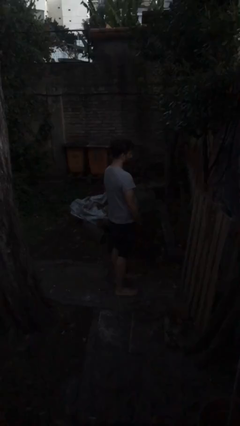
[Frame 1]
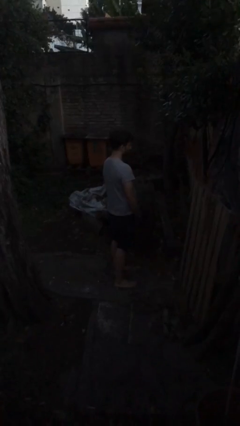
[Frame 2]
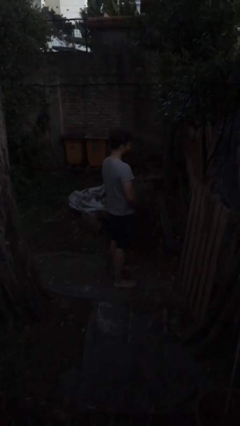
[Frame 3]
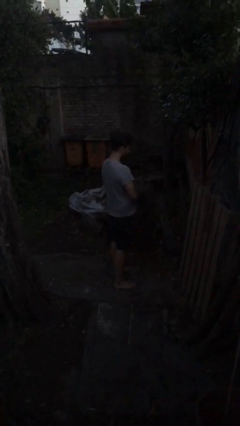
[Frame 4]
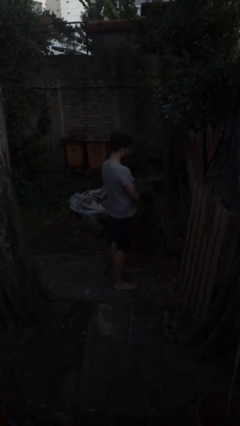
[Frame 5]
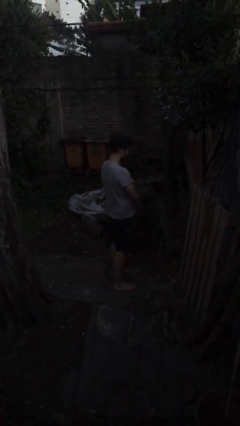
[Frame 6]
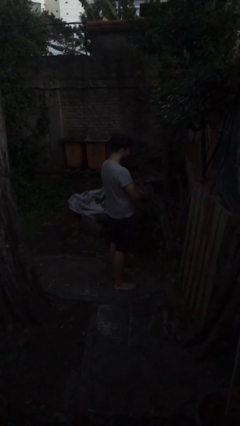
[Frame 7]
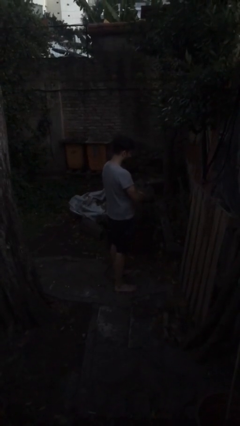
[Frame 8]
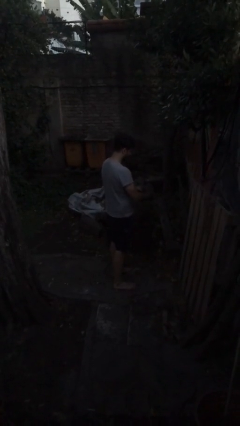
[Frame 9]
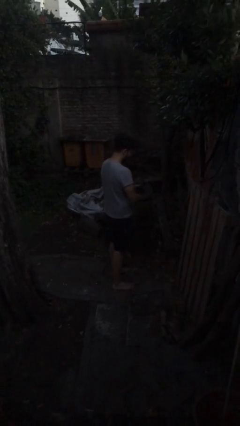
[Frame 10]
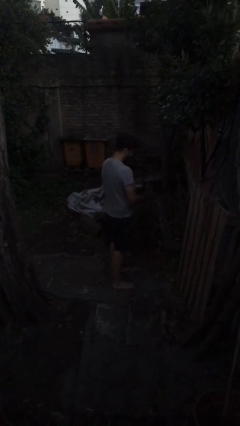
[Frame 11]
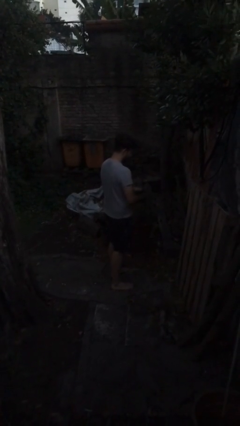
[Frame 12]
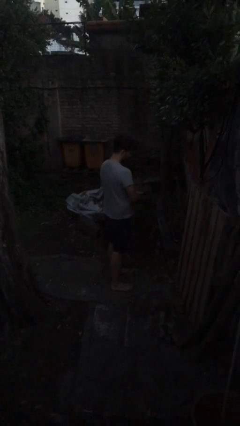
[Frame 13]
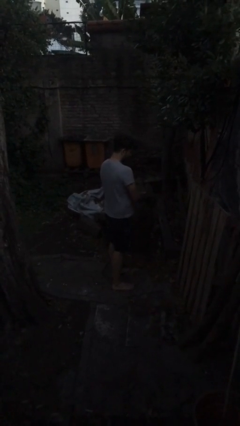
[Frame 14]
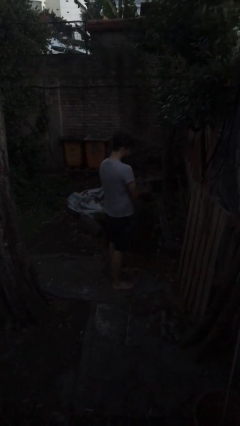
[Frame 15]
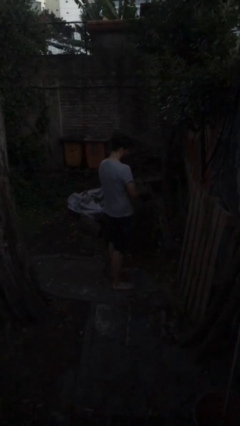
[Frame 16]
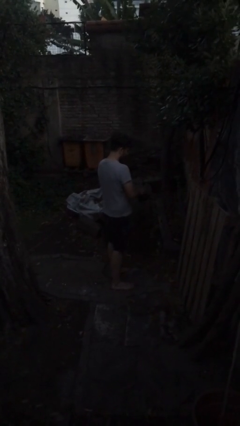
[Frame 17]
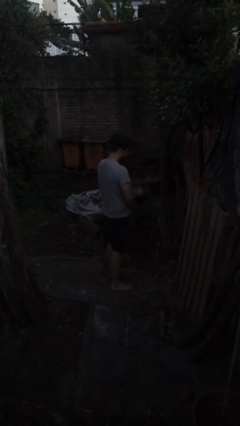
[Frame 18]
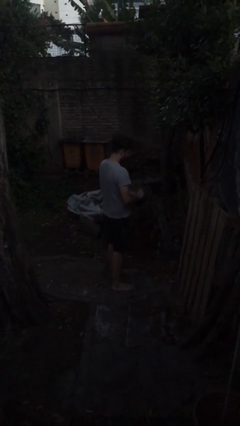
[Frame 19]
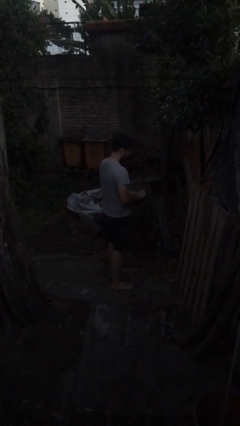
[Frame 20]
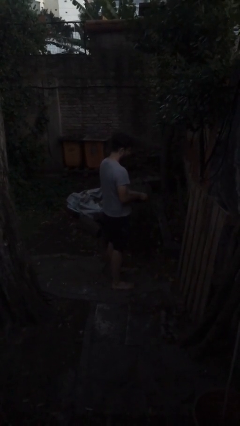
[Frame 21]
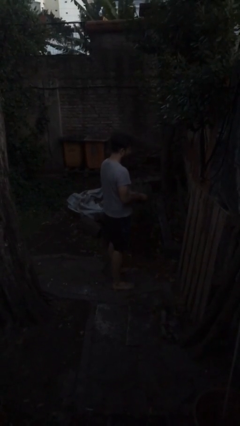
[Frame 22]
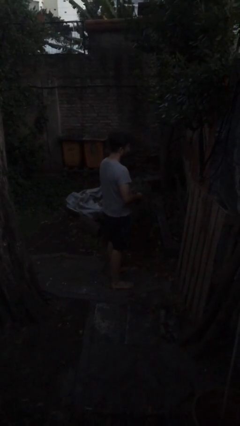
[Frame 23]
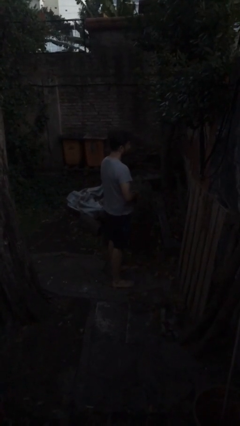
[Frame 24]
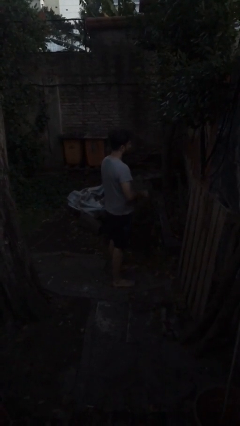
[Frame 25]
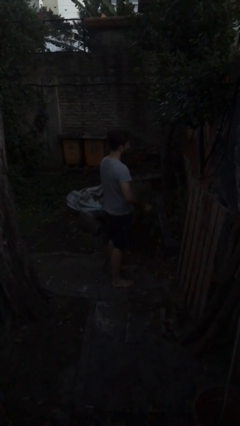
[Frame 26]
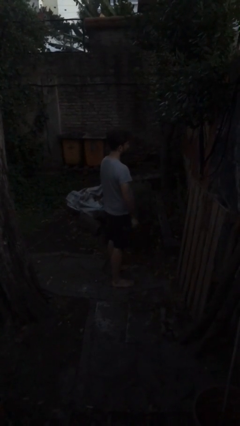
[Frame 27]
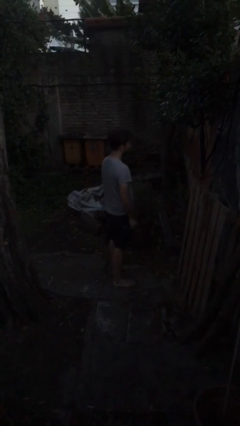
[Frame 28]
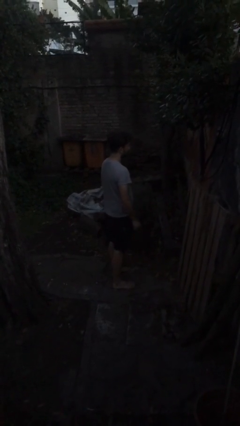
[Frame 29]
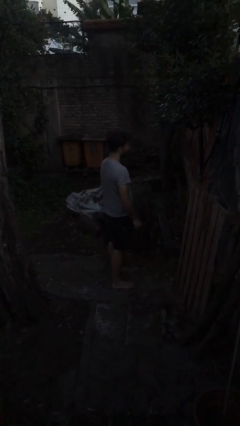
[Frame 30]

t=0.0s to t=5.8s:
person takes off gloves

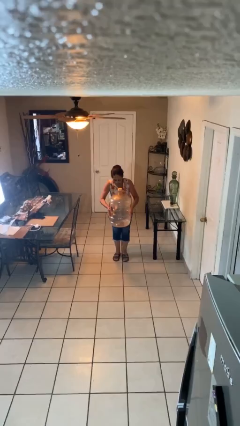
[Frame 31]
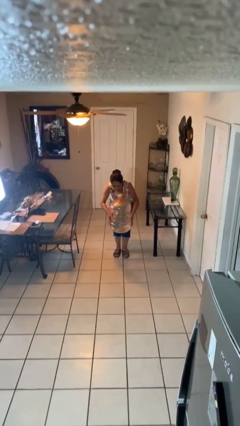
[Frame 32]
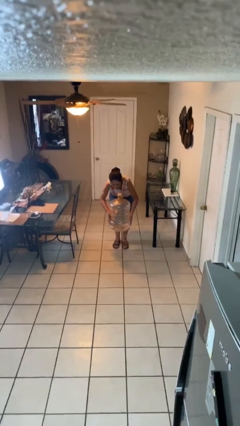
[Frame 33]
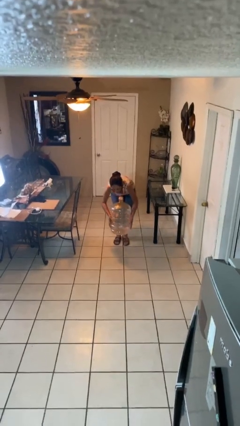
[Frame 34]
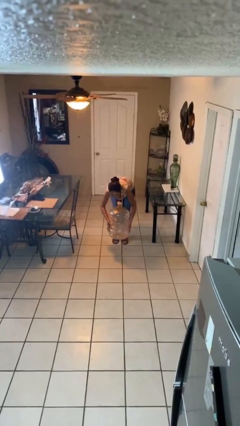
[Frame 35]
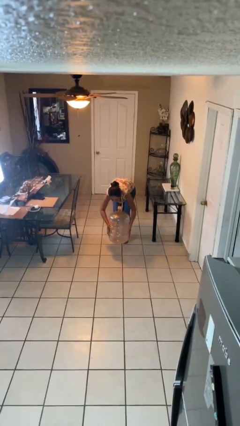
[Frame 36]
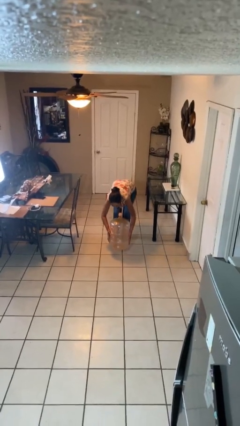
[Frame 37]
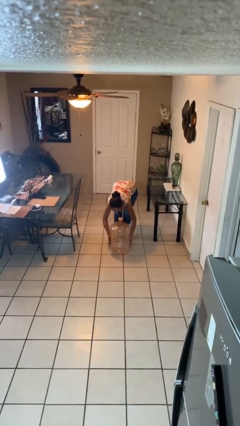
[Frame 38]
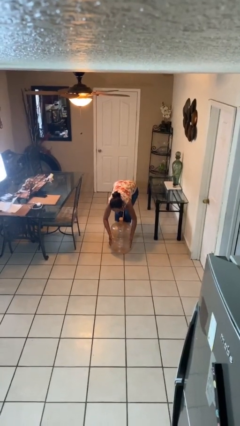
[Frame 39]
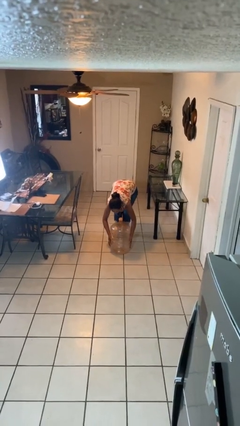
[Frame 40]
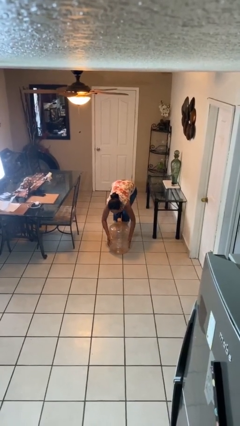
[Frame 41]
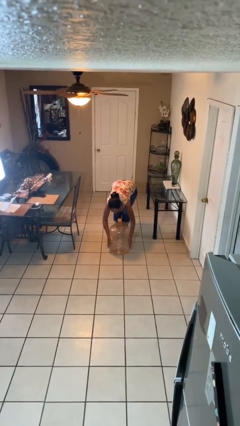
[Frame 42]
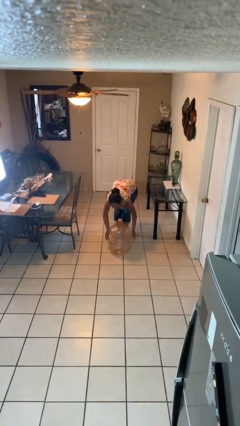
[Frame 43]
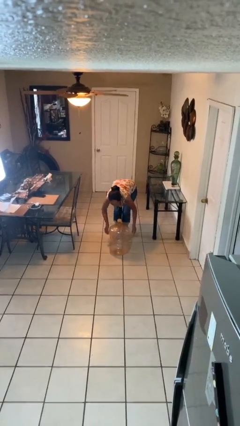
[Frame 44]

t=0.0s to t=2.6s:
person puts down object on floor

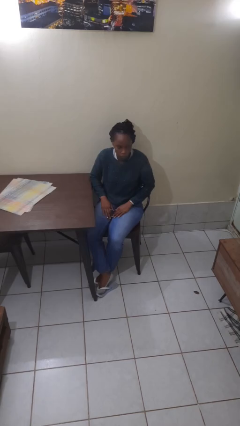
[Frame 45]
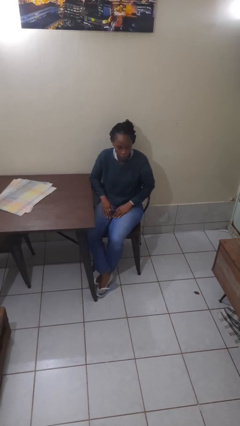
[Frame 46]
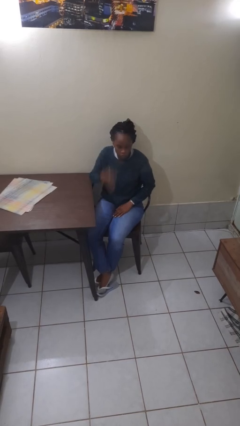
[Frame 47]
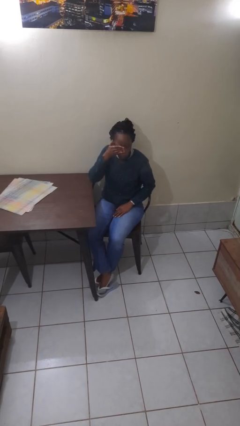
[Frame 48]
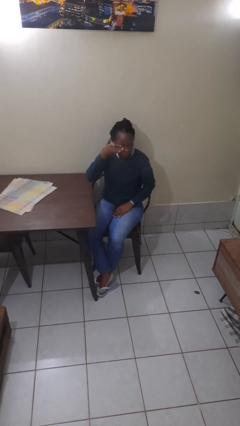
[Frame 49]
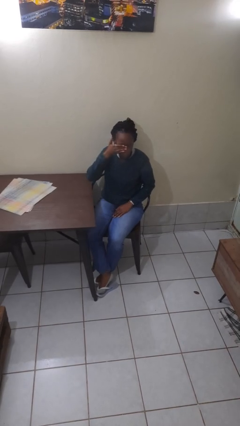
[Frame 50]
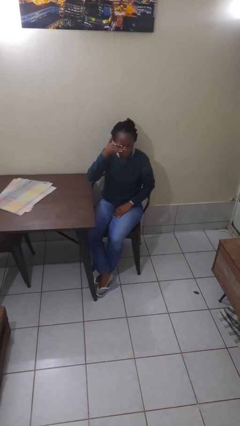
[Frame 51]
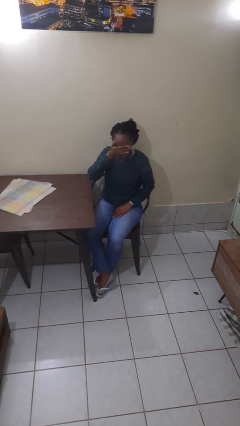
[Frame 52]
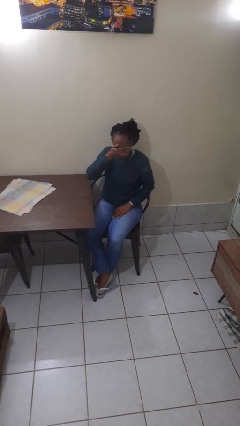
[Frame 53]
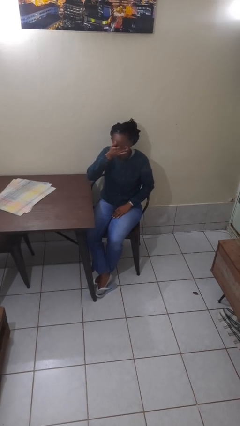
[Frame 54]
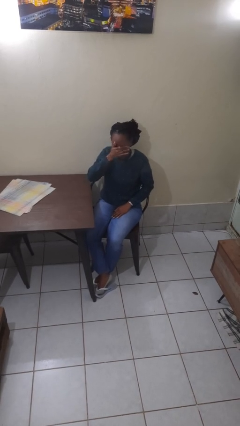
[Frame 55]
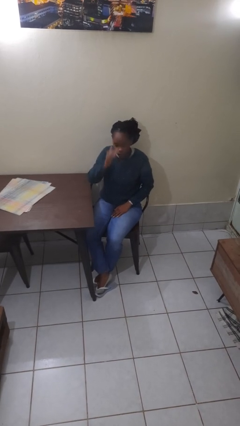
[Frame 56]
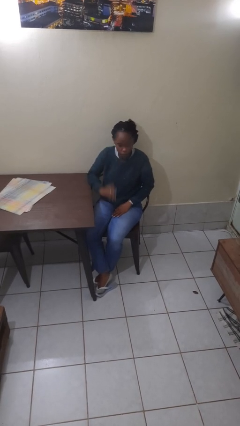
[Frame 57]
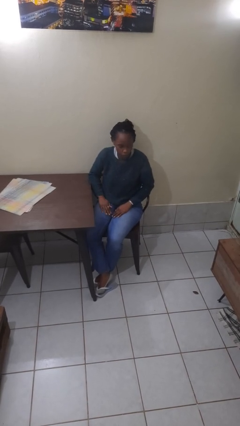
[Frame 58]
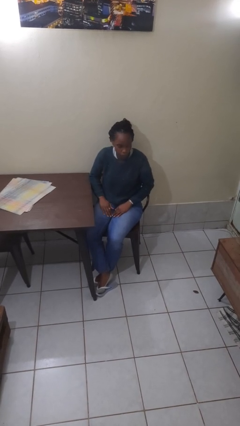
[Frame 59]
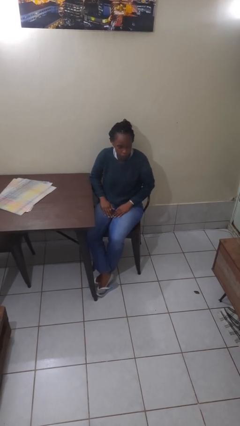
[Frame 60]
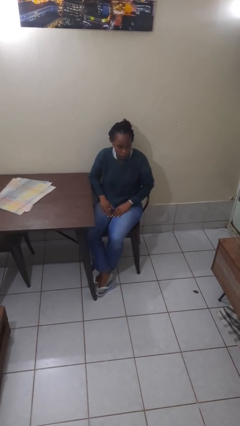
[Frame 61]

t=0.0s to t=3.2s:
person rubs eyes

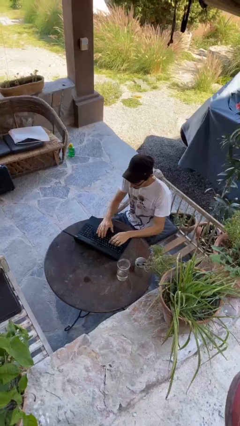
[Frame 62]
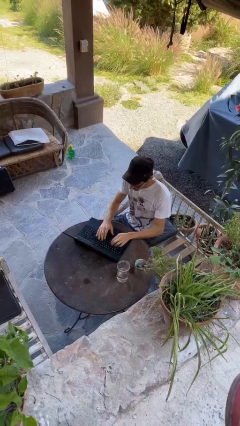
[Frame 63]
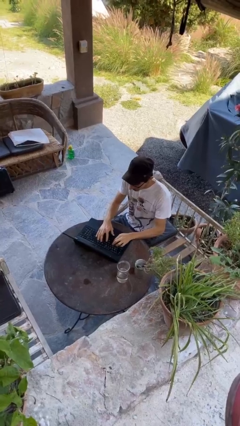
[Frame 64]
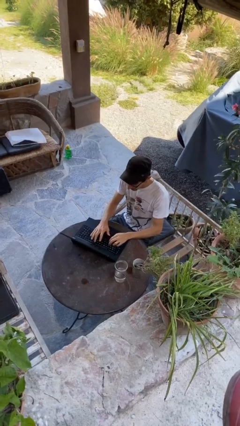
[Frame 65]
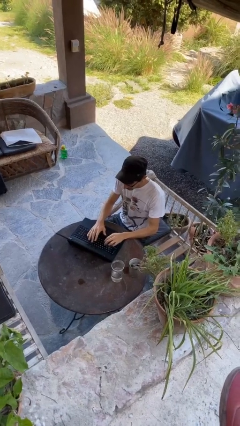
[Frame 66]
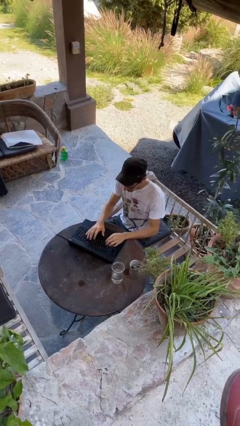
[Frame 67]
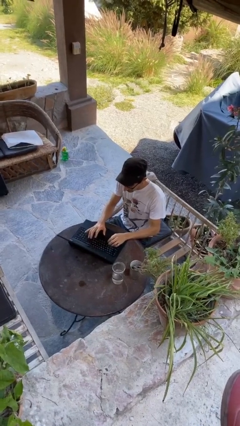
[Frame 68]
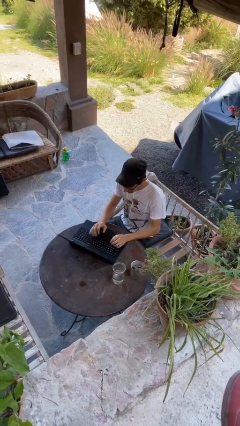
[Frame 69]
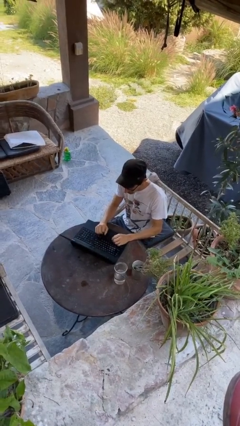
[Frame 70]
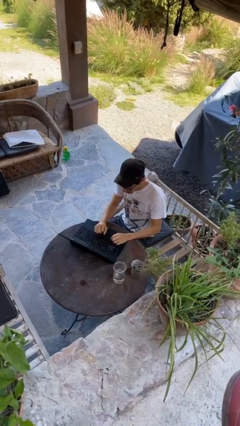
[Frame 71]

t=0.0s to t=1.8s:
person interacts with laptop

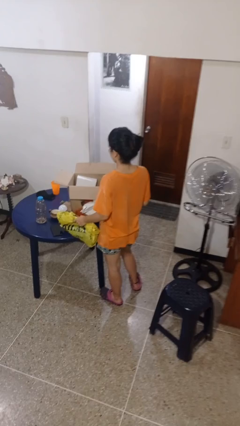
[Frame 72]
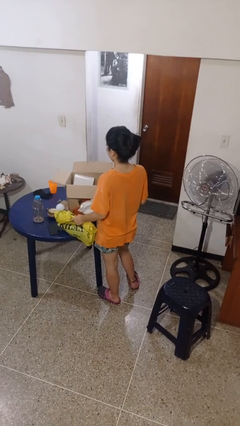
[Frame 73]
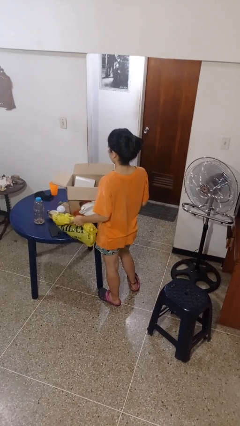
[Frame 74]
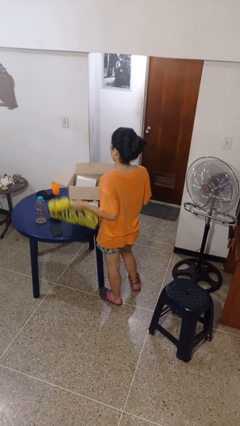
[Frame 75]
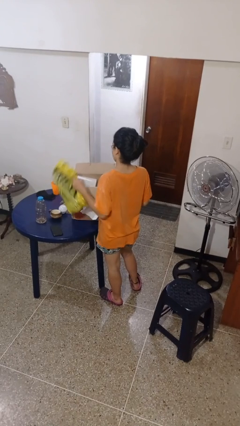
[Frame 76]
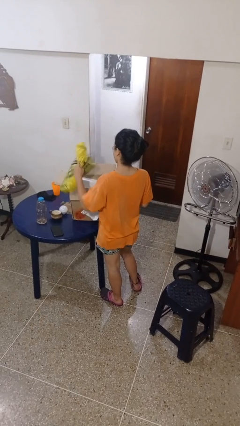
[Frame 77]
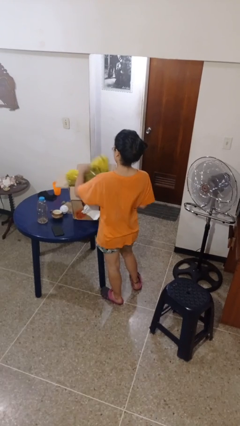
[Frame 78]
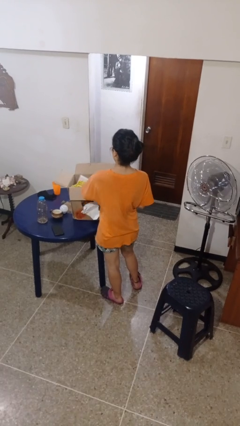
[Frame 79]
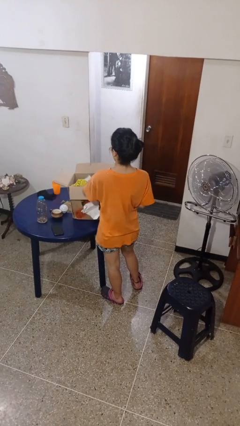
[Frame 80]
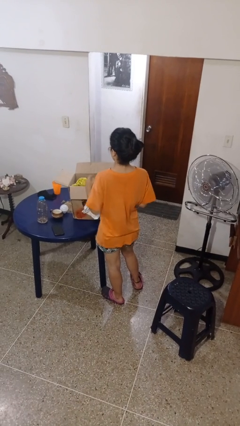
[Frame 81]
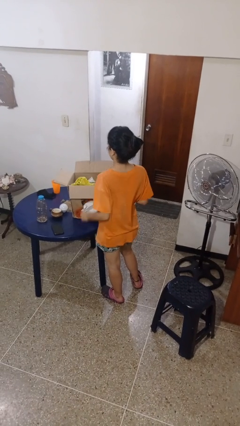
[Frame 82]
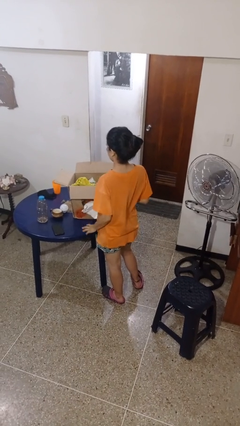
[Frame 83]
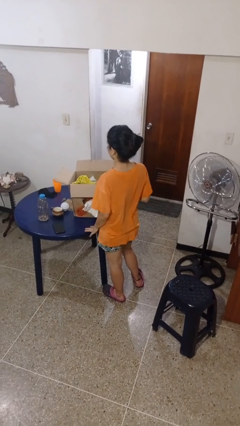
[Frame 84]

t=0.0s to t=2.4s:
person puts object into box

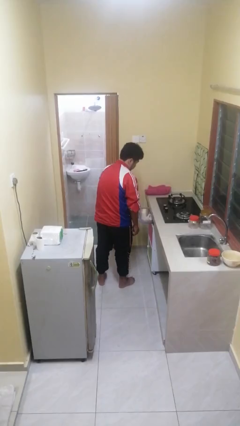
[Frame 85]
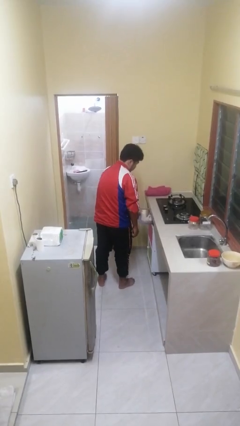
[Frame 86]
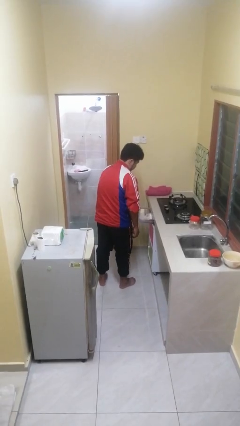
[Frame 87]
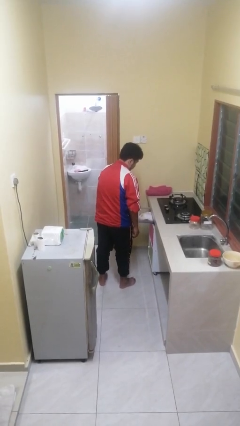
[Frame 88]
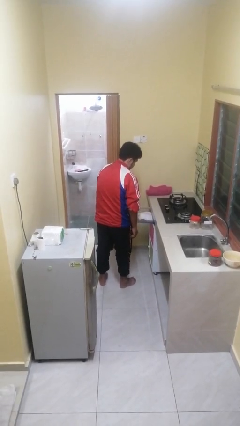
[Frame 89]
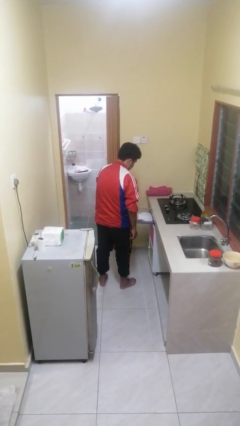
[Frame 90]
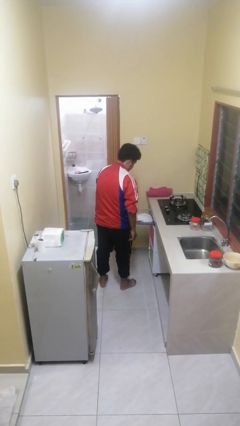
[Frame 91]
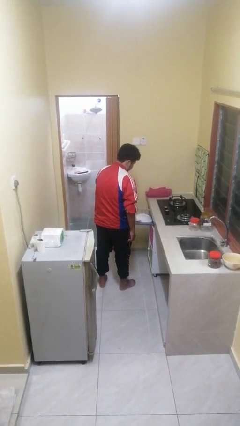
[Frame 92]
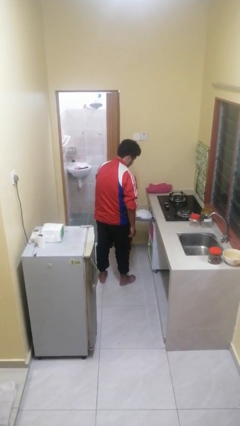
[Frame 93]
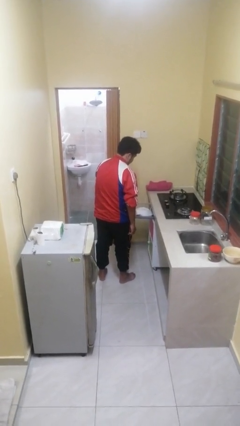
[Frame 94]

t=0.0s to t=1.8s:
person opens kitchen drawer
